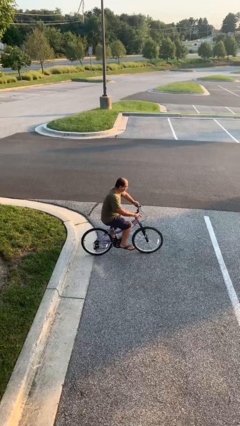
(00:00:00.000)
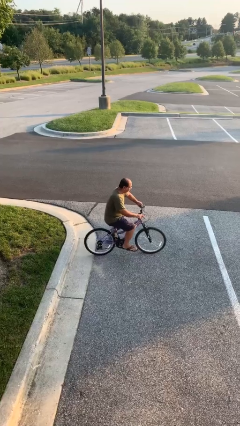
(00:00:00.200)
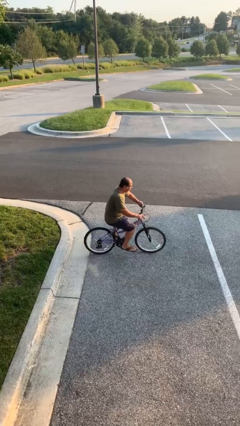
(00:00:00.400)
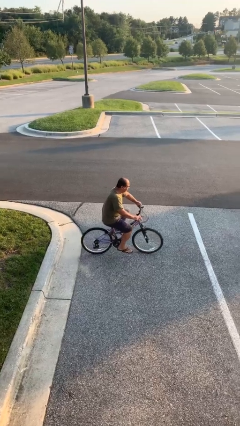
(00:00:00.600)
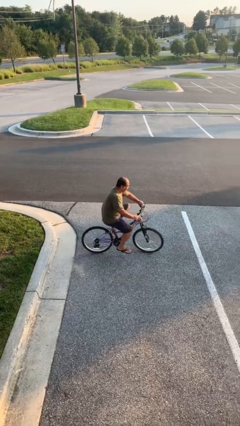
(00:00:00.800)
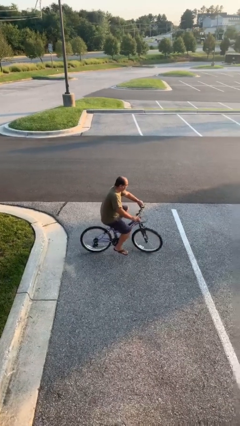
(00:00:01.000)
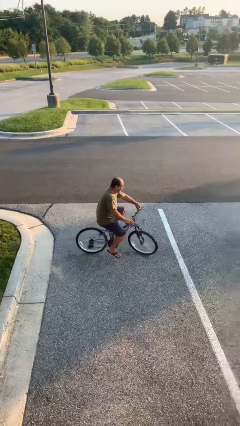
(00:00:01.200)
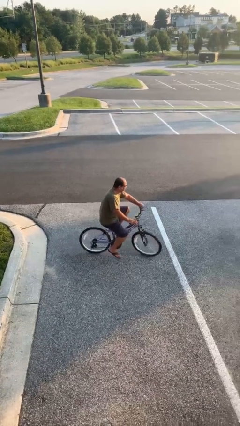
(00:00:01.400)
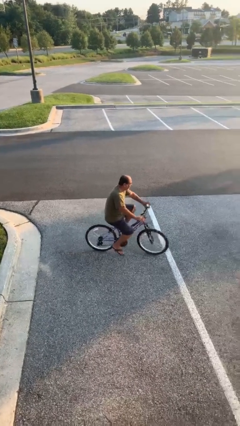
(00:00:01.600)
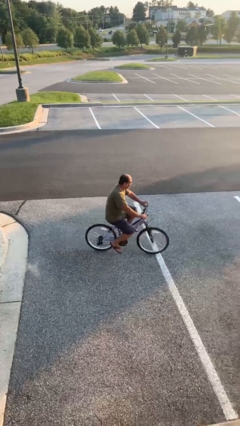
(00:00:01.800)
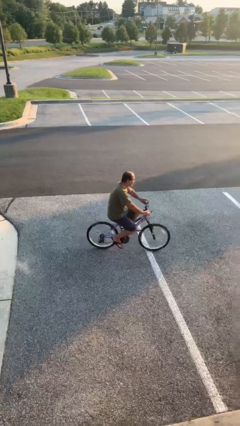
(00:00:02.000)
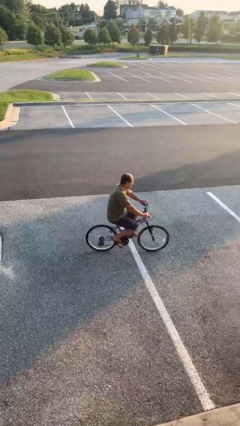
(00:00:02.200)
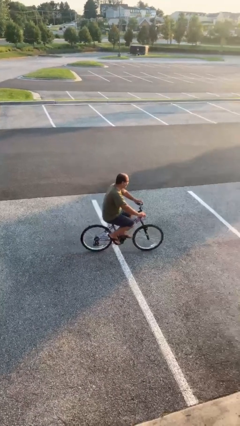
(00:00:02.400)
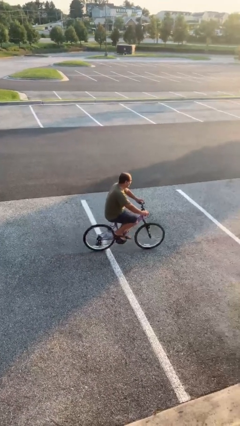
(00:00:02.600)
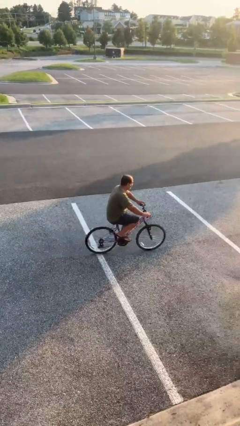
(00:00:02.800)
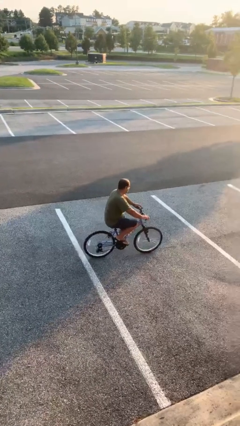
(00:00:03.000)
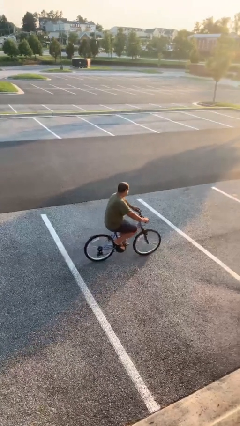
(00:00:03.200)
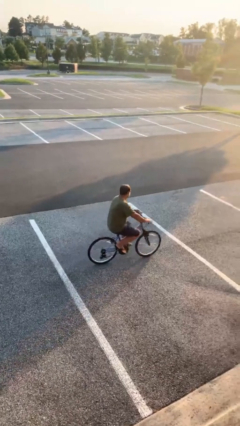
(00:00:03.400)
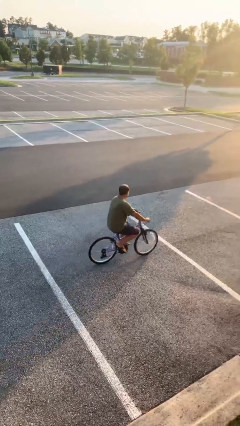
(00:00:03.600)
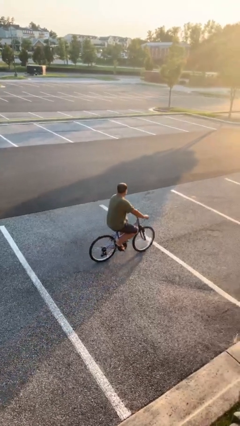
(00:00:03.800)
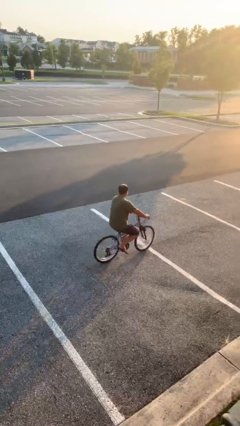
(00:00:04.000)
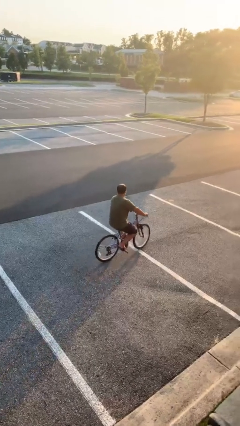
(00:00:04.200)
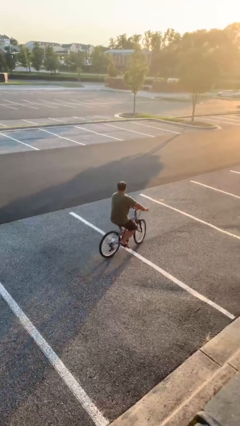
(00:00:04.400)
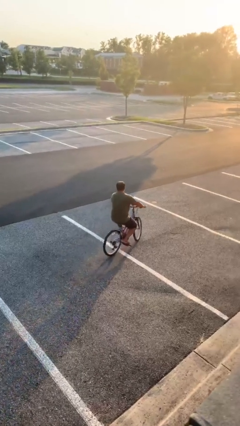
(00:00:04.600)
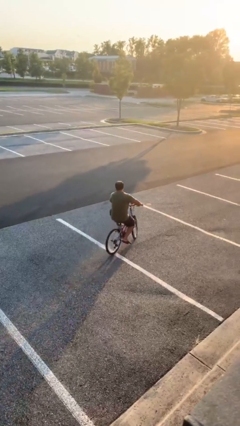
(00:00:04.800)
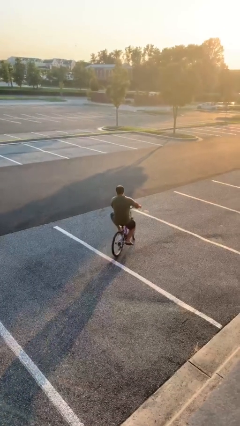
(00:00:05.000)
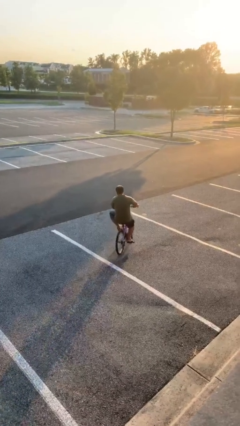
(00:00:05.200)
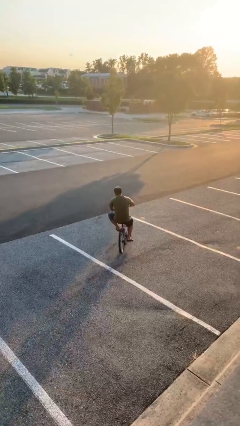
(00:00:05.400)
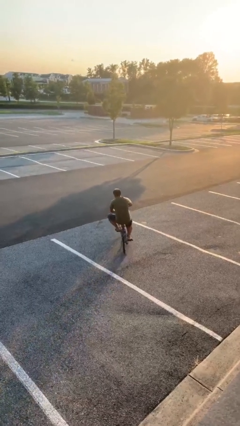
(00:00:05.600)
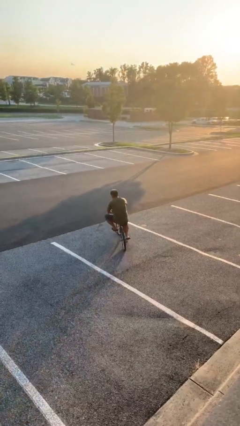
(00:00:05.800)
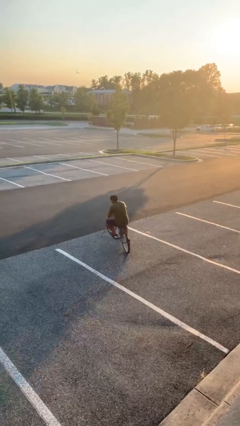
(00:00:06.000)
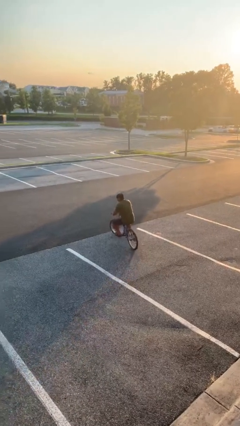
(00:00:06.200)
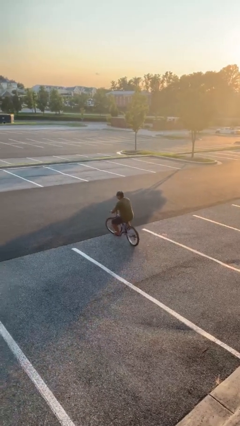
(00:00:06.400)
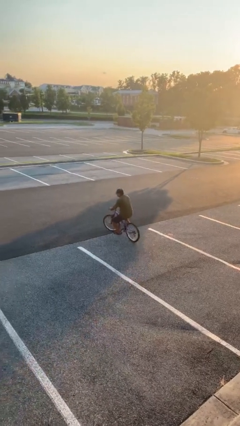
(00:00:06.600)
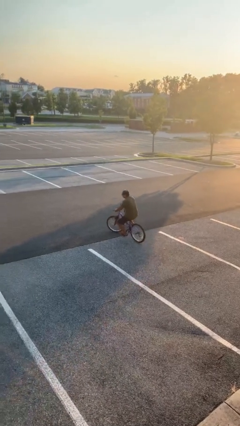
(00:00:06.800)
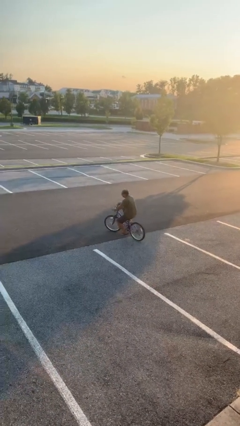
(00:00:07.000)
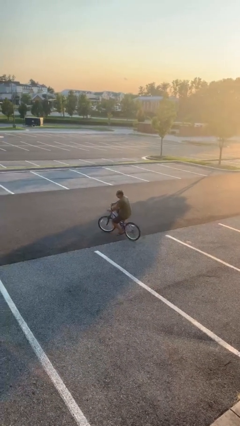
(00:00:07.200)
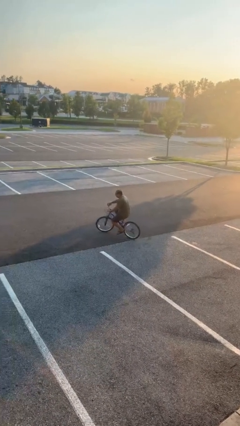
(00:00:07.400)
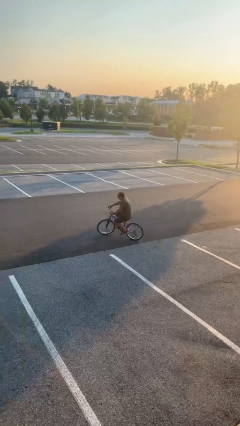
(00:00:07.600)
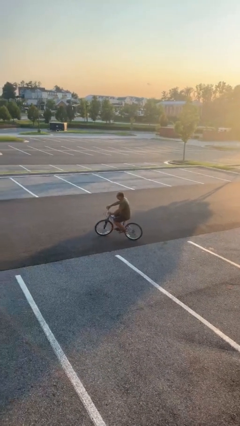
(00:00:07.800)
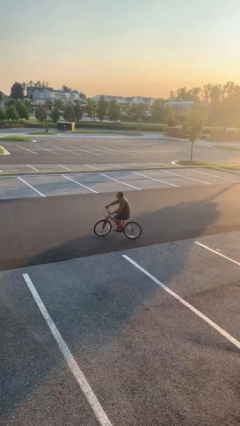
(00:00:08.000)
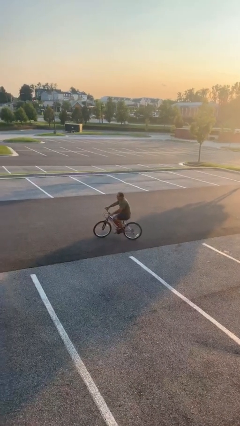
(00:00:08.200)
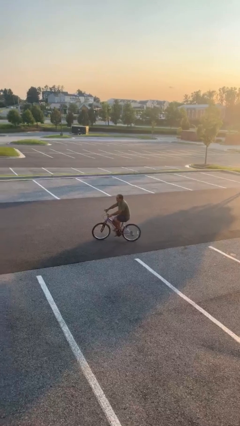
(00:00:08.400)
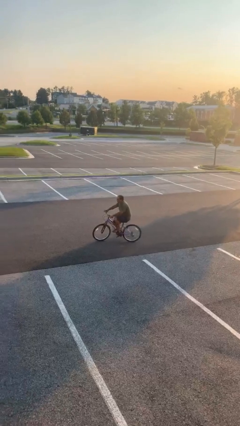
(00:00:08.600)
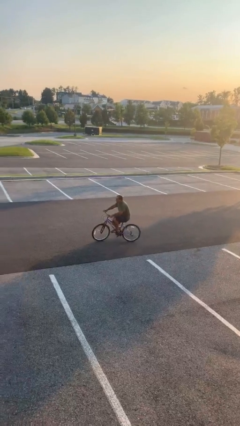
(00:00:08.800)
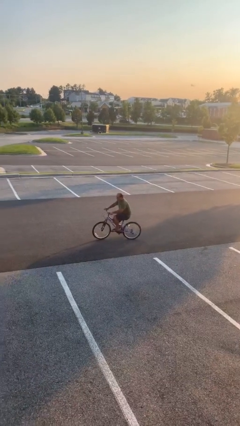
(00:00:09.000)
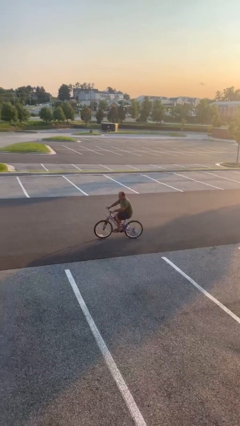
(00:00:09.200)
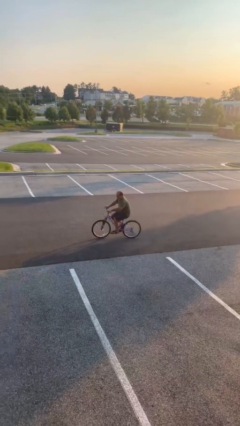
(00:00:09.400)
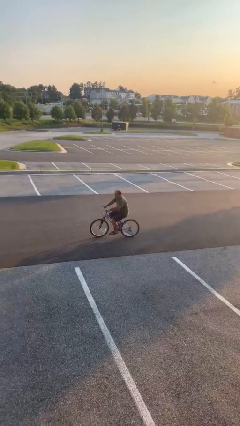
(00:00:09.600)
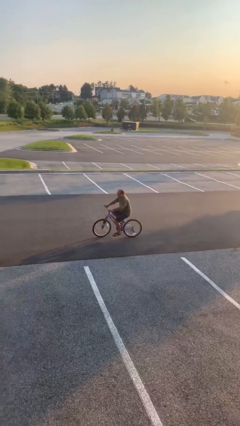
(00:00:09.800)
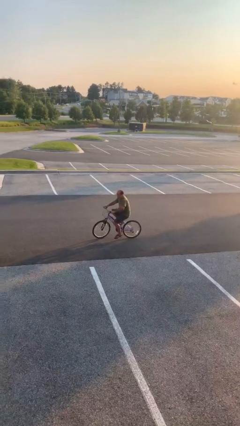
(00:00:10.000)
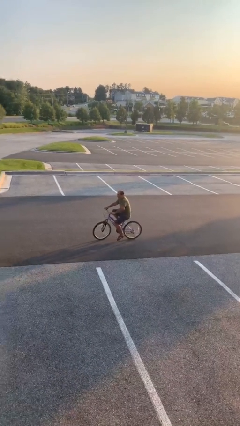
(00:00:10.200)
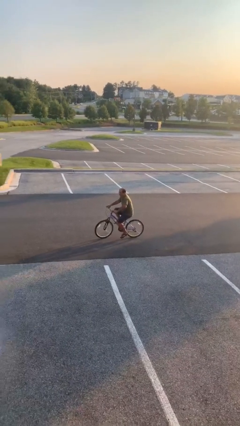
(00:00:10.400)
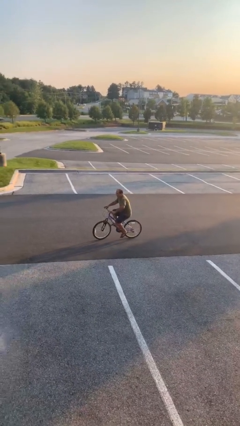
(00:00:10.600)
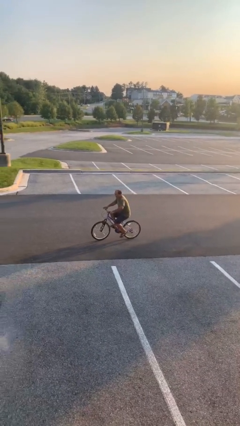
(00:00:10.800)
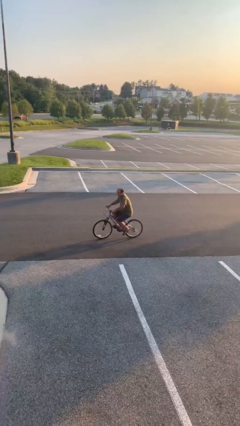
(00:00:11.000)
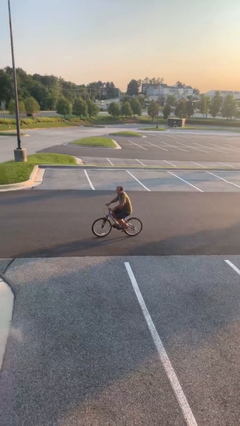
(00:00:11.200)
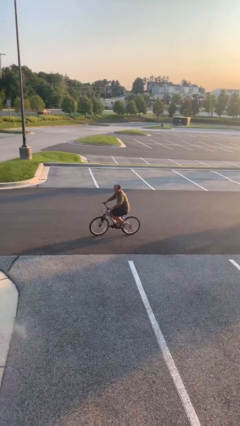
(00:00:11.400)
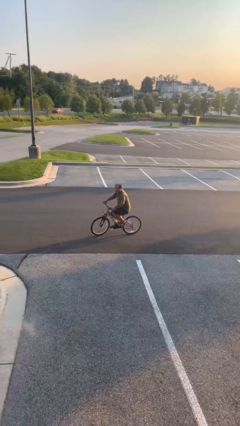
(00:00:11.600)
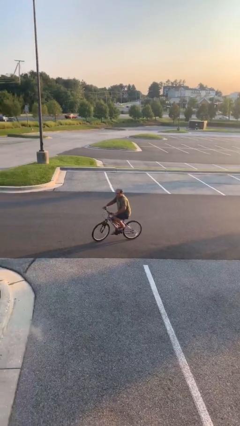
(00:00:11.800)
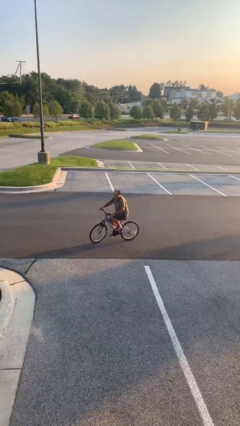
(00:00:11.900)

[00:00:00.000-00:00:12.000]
person rides bicycle

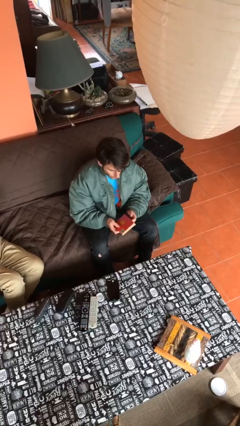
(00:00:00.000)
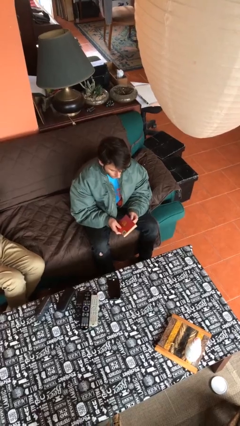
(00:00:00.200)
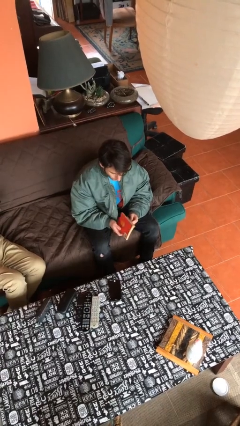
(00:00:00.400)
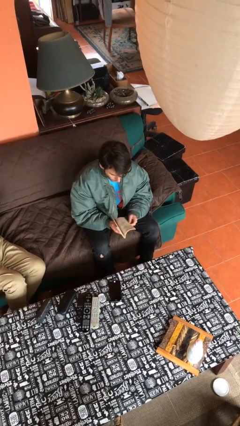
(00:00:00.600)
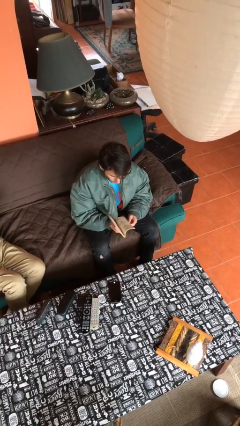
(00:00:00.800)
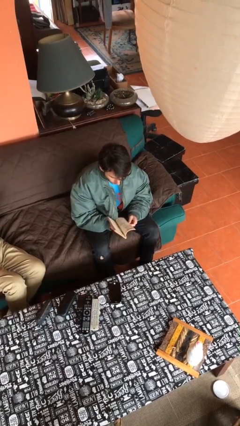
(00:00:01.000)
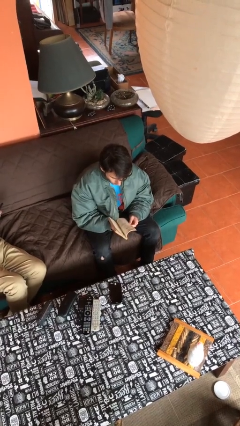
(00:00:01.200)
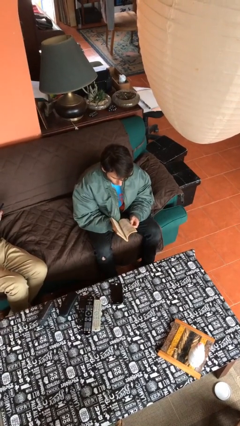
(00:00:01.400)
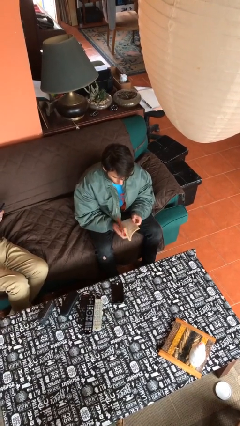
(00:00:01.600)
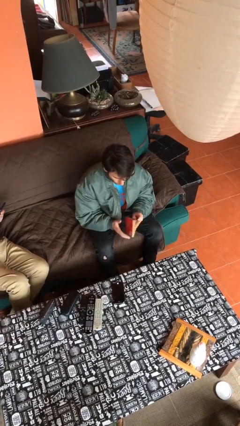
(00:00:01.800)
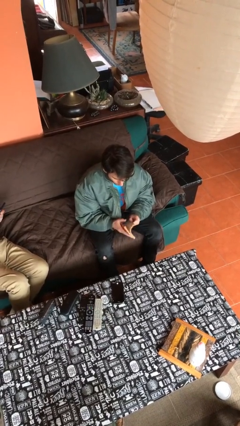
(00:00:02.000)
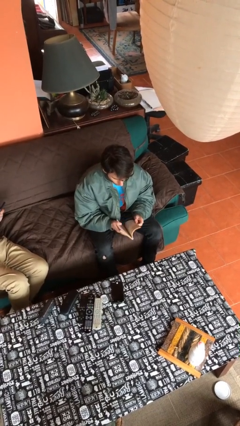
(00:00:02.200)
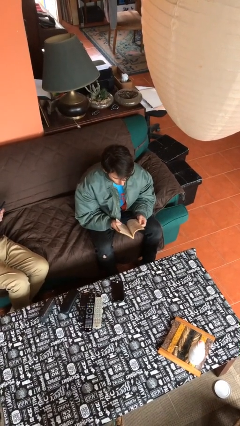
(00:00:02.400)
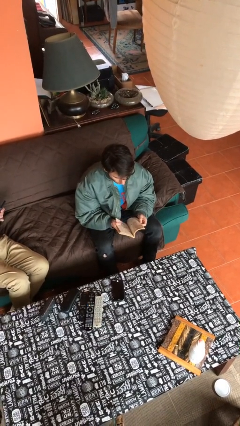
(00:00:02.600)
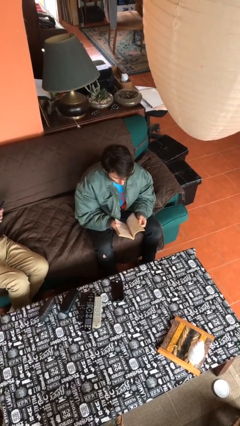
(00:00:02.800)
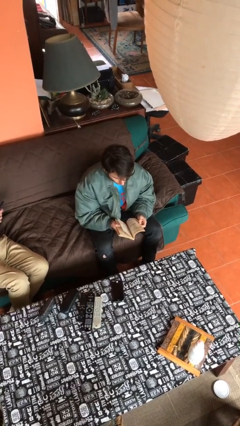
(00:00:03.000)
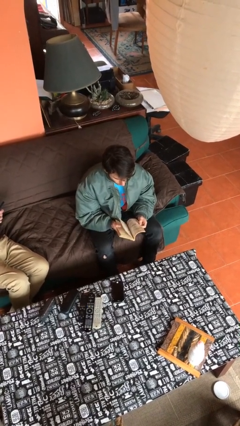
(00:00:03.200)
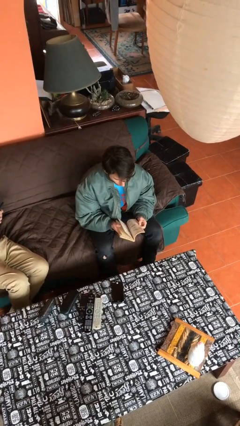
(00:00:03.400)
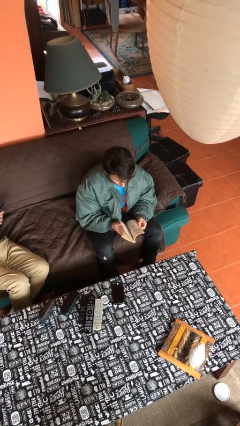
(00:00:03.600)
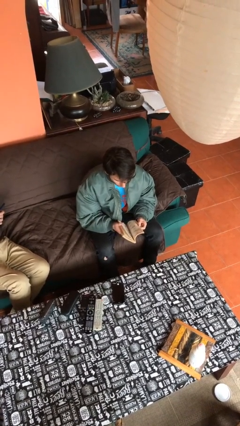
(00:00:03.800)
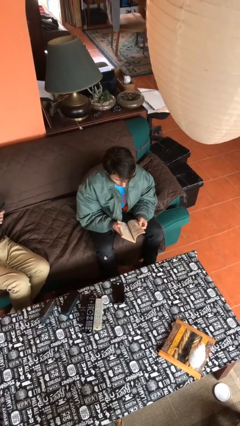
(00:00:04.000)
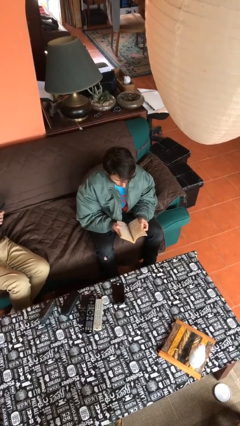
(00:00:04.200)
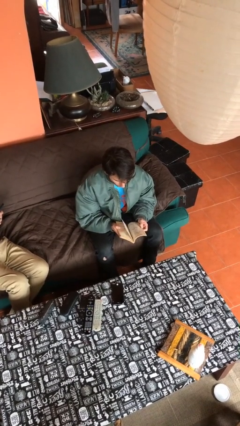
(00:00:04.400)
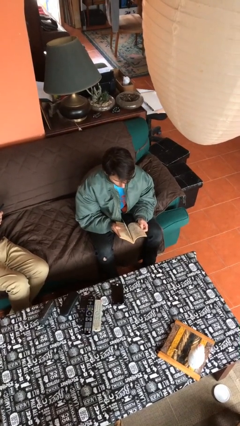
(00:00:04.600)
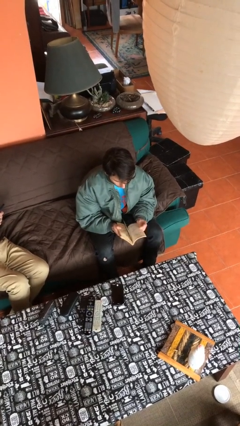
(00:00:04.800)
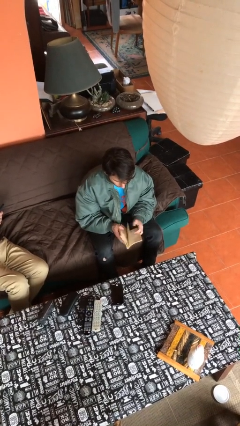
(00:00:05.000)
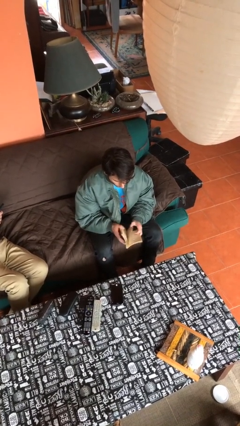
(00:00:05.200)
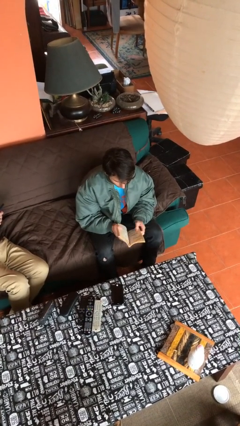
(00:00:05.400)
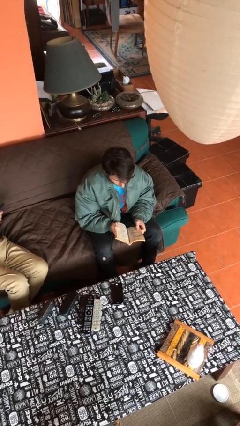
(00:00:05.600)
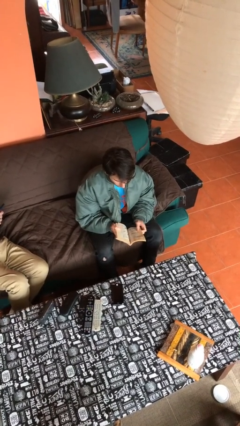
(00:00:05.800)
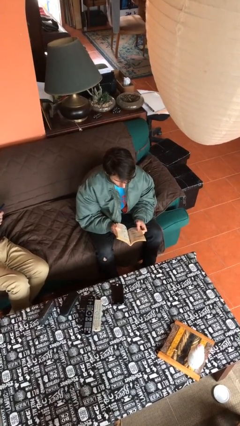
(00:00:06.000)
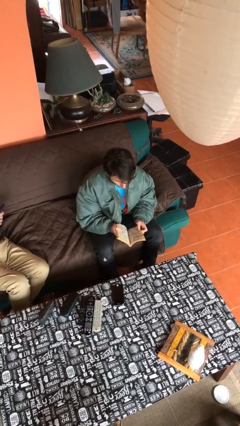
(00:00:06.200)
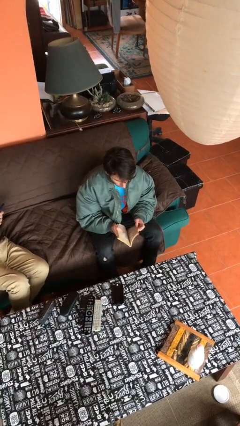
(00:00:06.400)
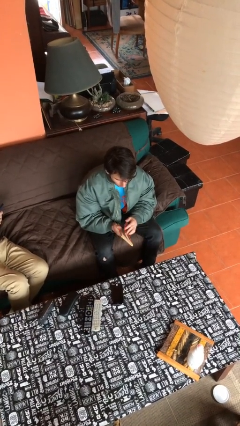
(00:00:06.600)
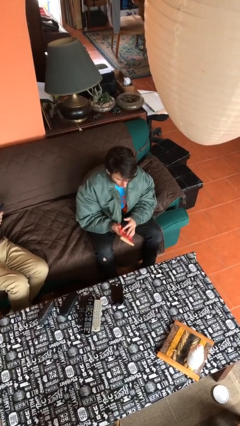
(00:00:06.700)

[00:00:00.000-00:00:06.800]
person reads document
